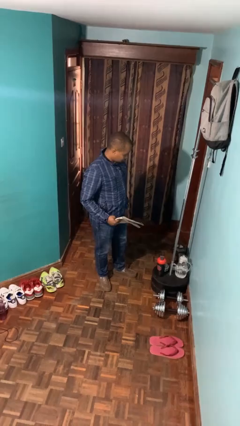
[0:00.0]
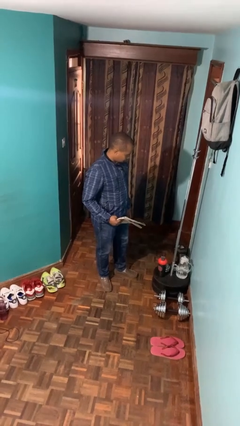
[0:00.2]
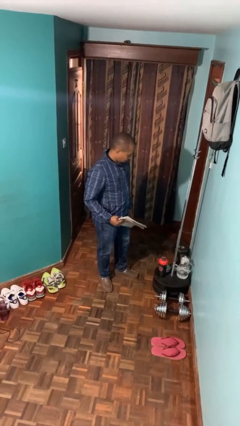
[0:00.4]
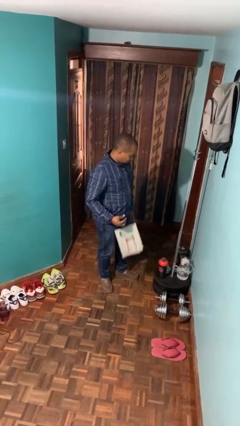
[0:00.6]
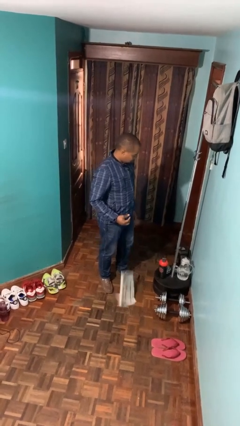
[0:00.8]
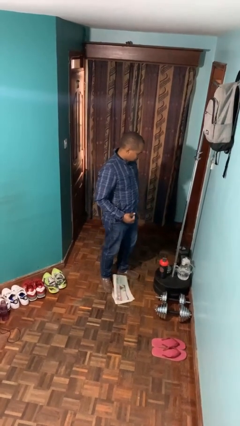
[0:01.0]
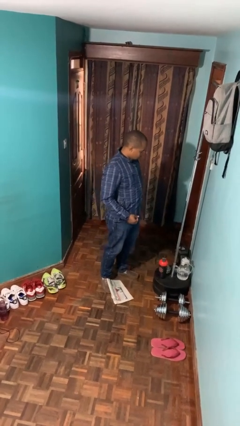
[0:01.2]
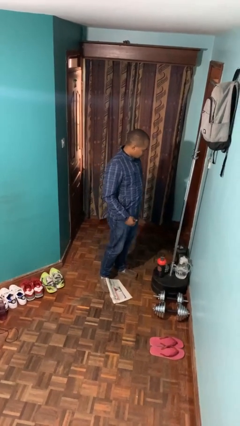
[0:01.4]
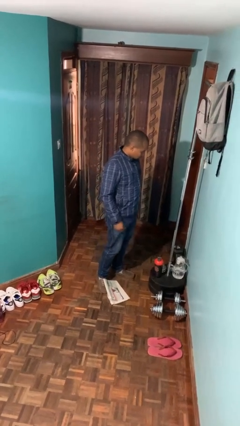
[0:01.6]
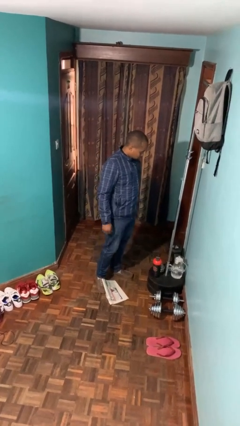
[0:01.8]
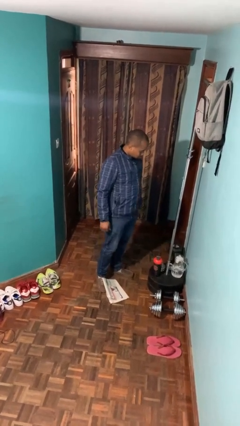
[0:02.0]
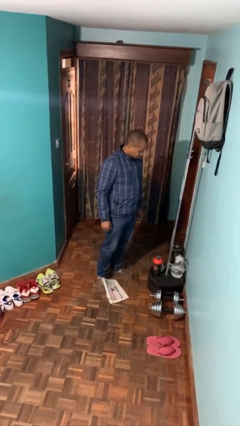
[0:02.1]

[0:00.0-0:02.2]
person drops object

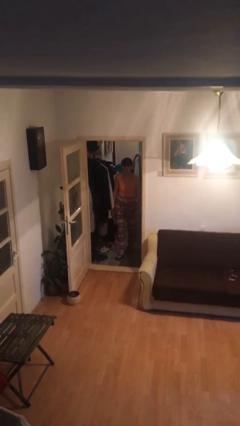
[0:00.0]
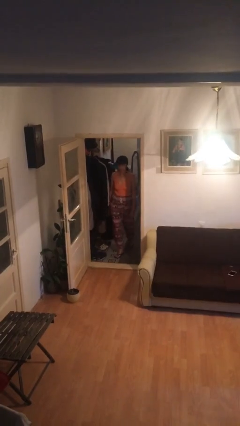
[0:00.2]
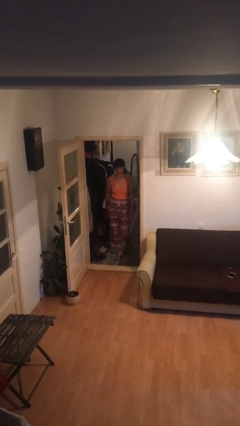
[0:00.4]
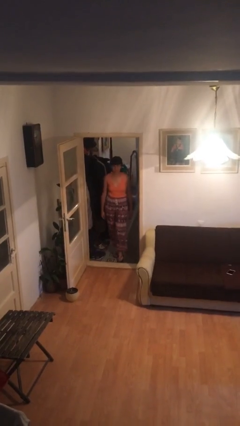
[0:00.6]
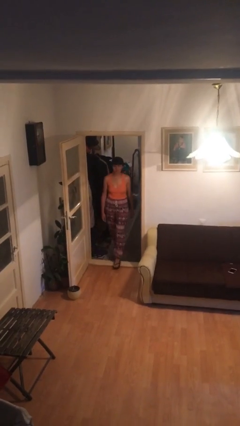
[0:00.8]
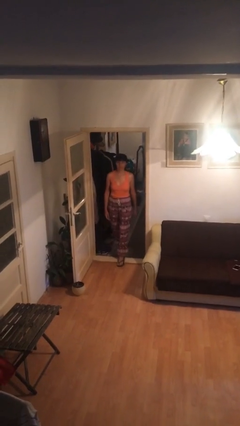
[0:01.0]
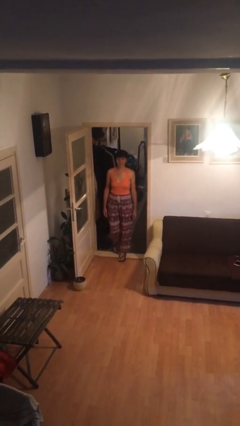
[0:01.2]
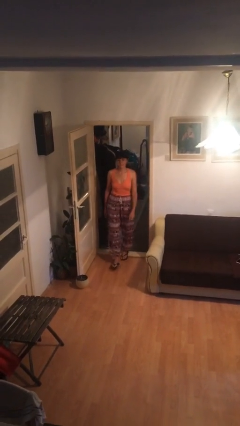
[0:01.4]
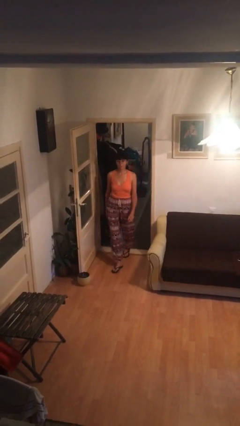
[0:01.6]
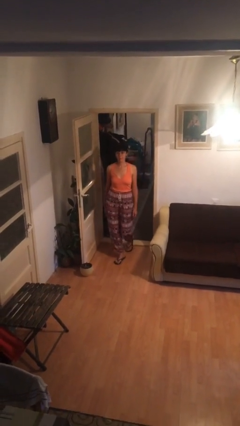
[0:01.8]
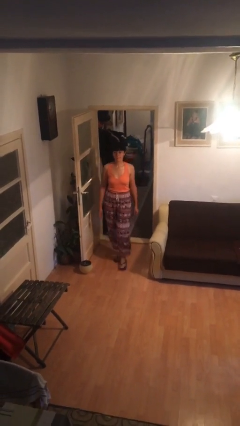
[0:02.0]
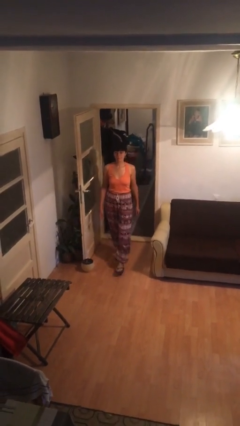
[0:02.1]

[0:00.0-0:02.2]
person enters scene through structure

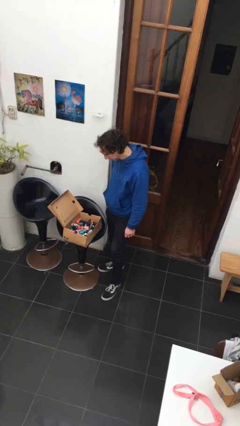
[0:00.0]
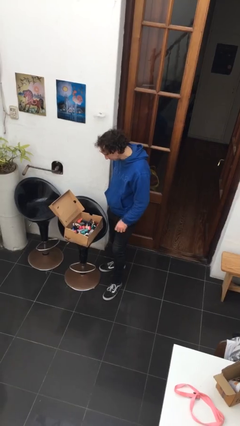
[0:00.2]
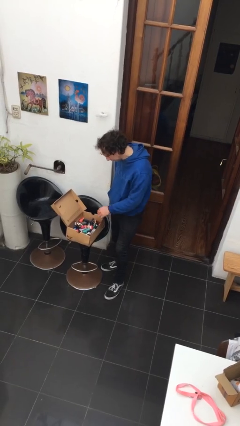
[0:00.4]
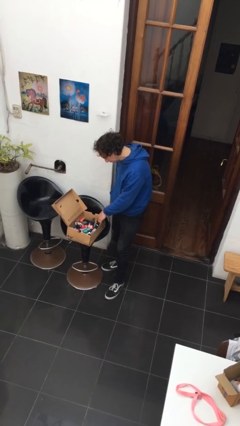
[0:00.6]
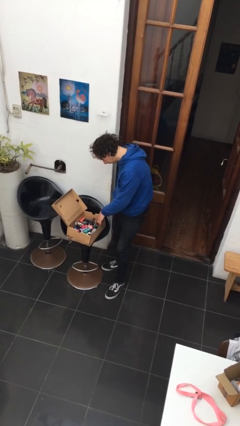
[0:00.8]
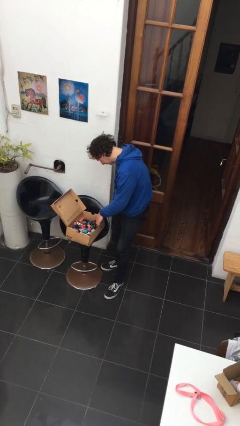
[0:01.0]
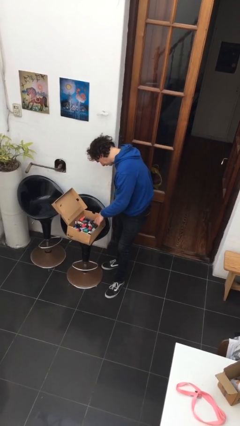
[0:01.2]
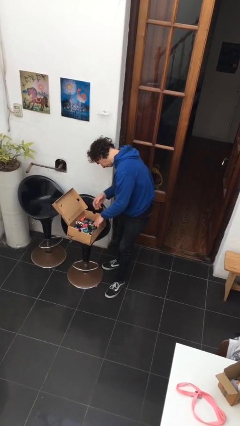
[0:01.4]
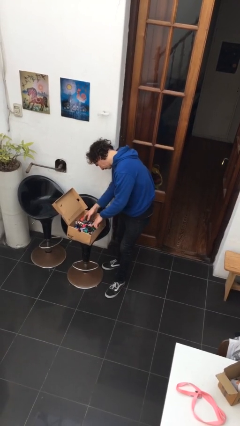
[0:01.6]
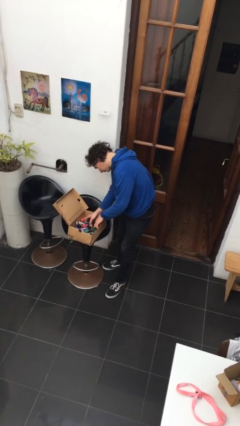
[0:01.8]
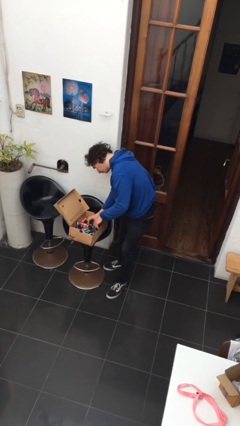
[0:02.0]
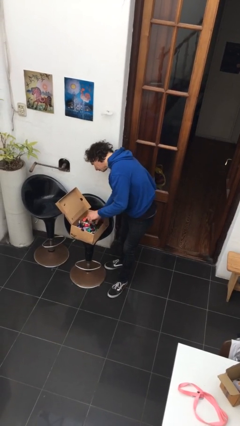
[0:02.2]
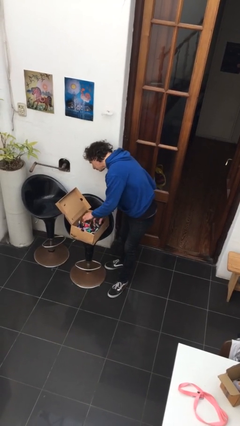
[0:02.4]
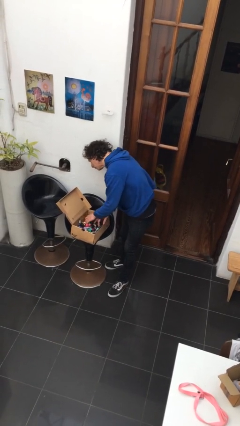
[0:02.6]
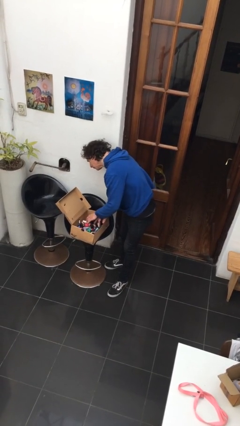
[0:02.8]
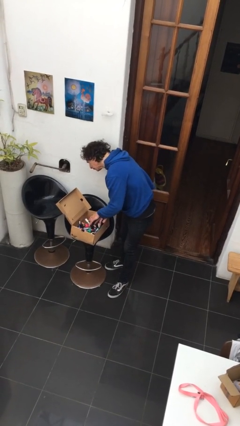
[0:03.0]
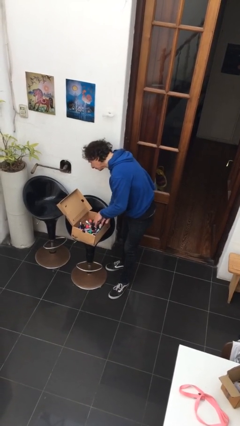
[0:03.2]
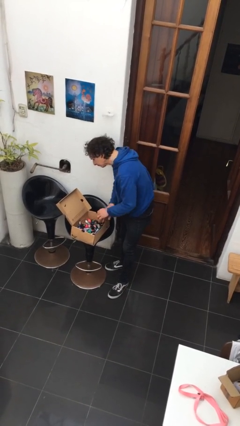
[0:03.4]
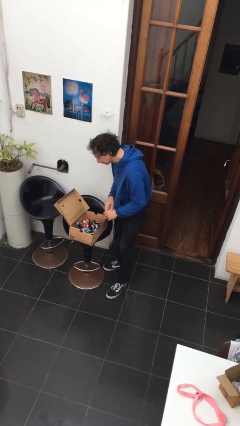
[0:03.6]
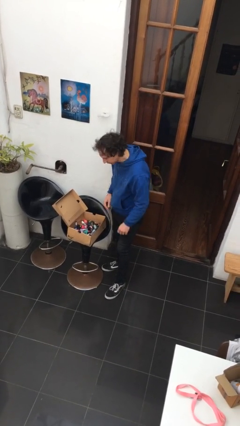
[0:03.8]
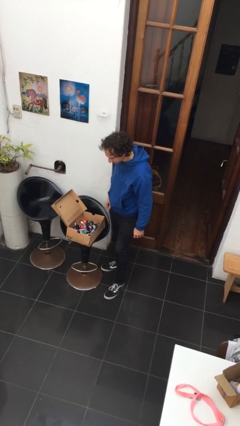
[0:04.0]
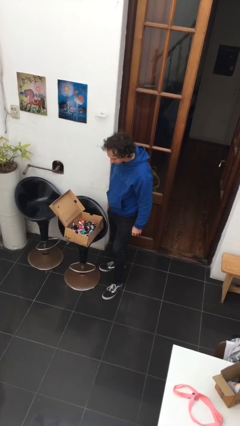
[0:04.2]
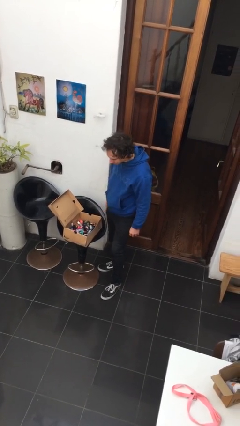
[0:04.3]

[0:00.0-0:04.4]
person searches in box

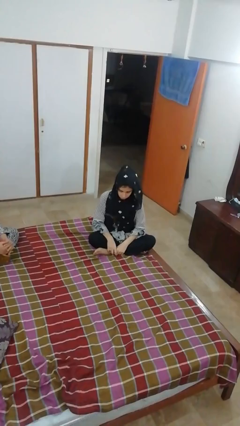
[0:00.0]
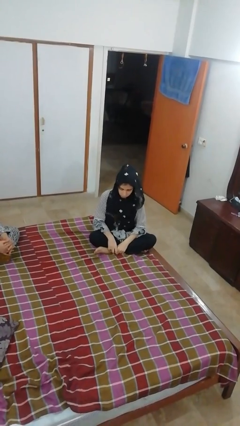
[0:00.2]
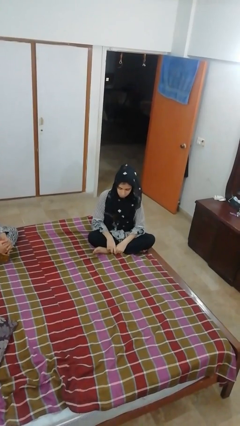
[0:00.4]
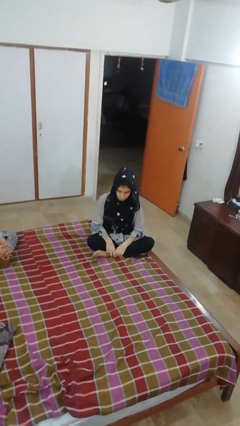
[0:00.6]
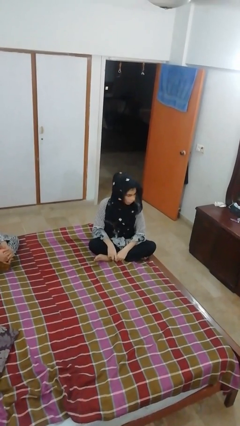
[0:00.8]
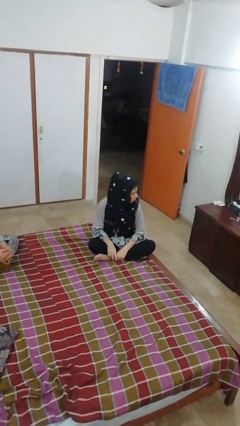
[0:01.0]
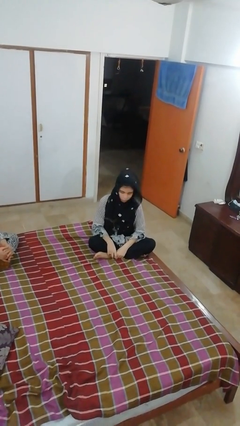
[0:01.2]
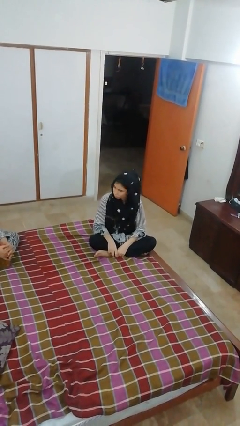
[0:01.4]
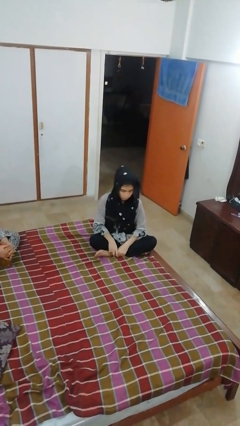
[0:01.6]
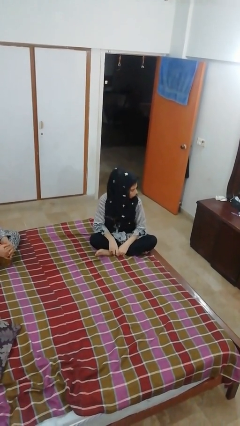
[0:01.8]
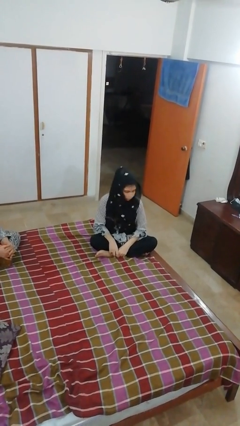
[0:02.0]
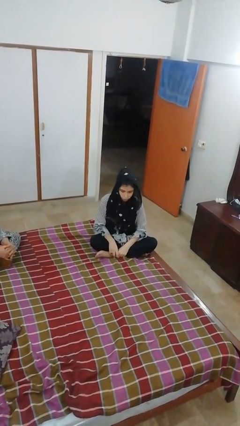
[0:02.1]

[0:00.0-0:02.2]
person shakes head

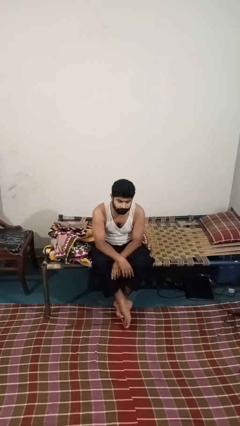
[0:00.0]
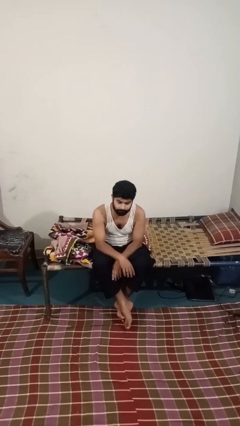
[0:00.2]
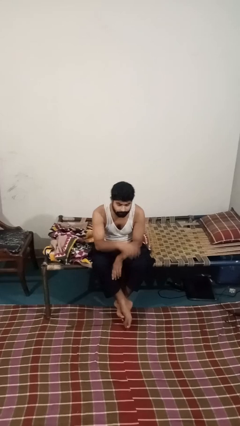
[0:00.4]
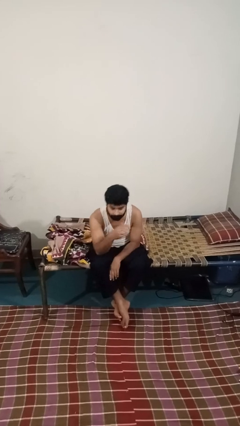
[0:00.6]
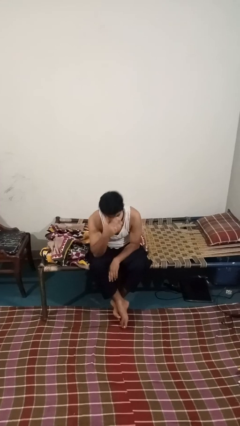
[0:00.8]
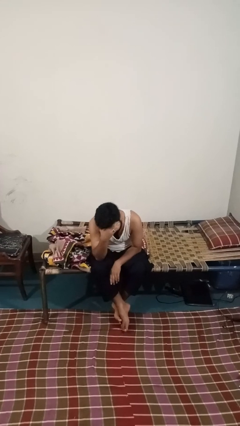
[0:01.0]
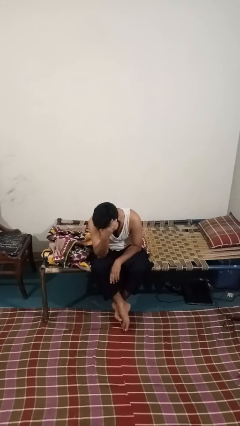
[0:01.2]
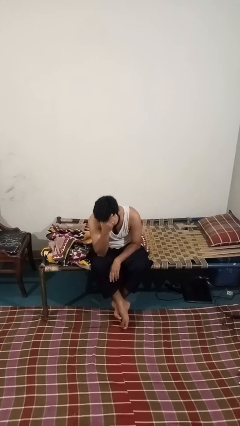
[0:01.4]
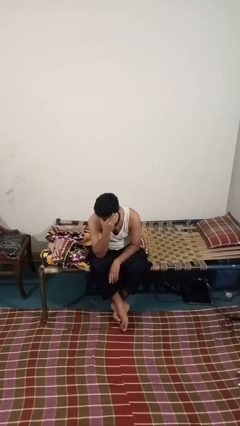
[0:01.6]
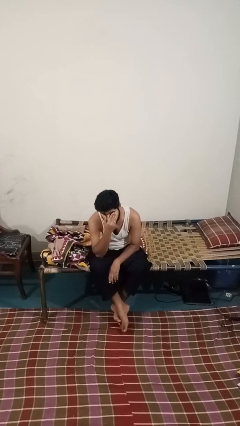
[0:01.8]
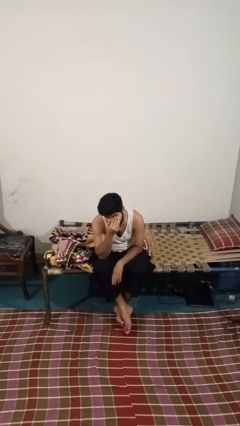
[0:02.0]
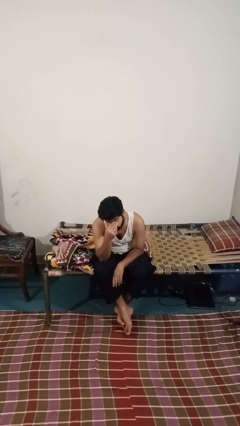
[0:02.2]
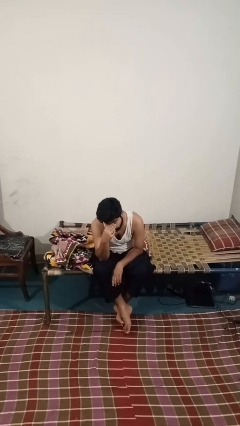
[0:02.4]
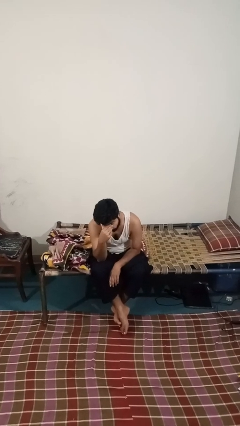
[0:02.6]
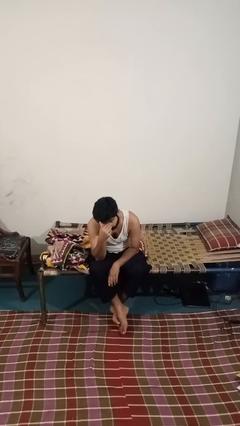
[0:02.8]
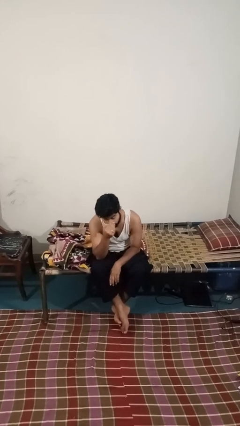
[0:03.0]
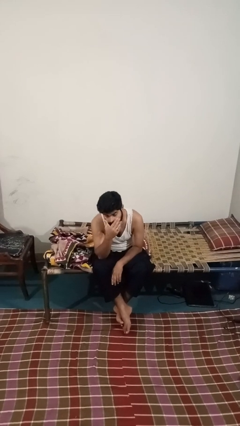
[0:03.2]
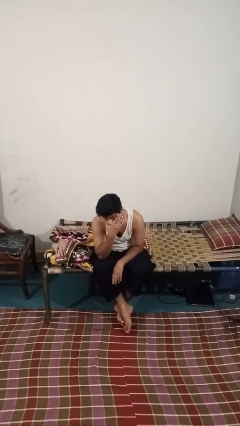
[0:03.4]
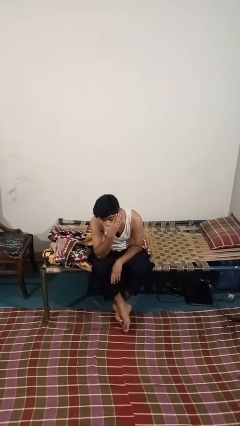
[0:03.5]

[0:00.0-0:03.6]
person covers face with hands

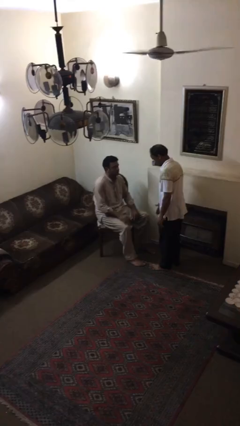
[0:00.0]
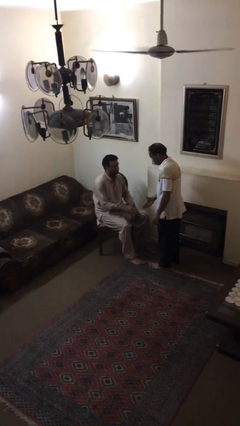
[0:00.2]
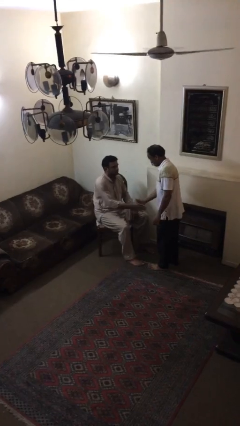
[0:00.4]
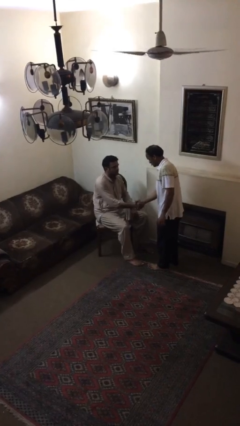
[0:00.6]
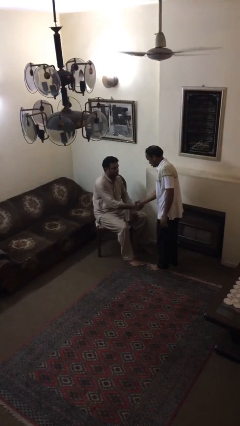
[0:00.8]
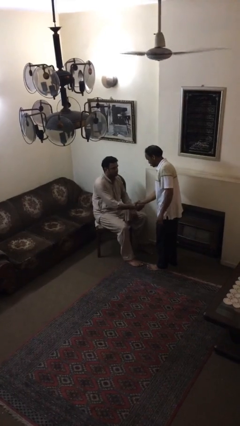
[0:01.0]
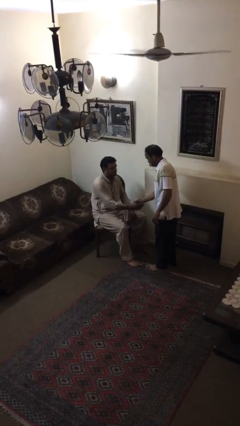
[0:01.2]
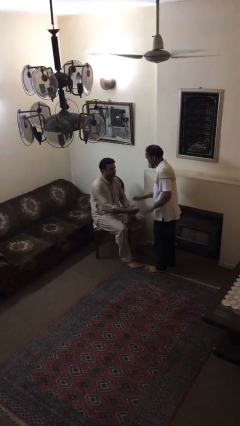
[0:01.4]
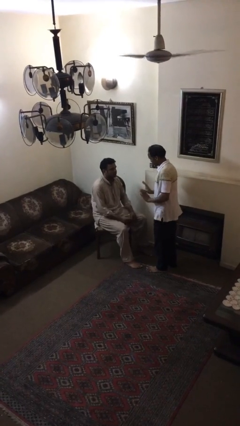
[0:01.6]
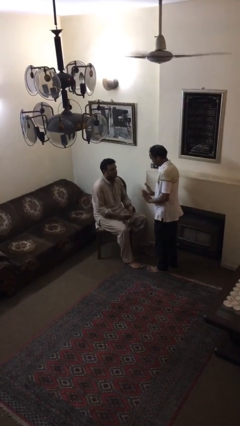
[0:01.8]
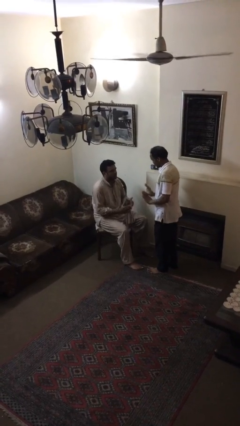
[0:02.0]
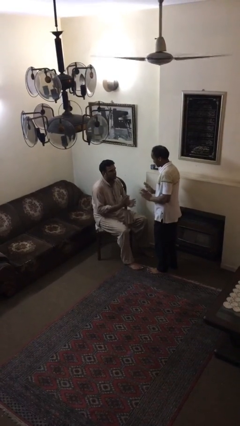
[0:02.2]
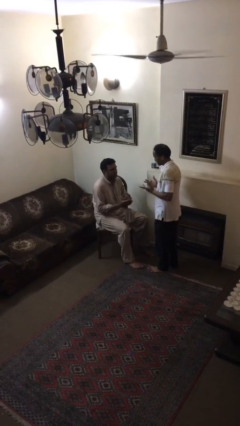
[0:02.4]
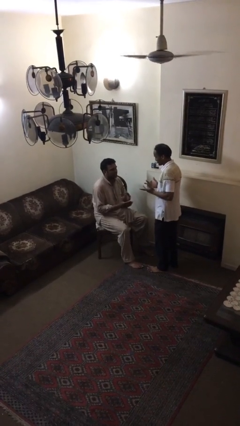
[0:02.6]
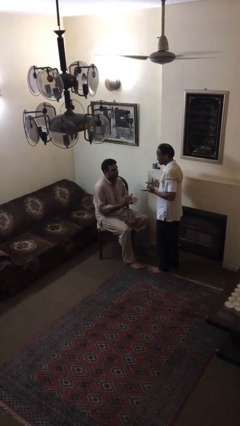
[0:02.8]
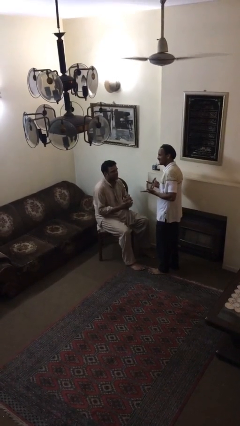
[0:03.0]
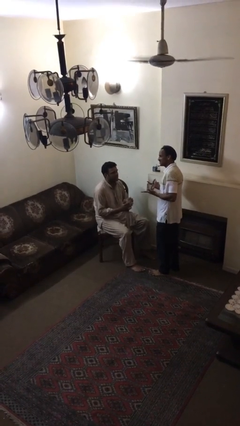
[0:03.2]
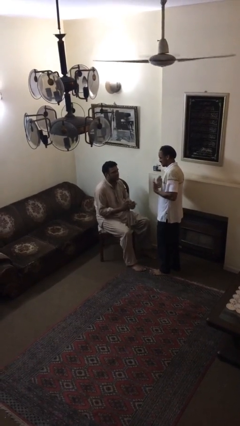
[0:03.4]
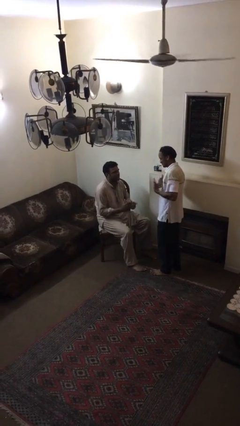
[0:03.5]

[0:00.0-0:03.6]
person shakes hand
